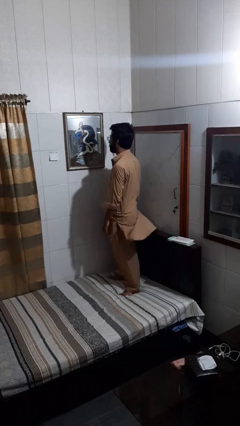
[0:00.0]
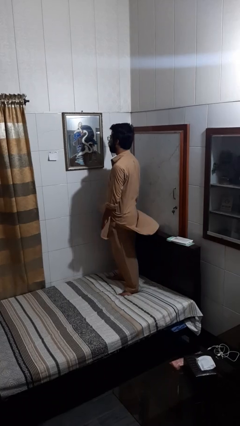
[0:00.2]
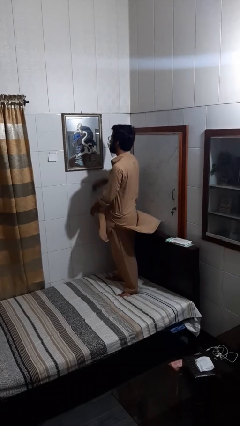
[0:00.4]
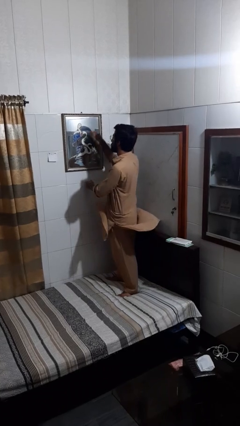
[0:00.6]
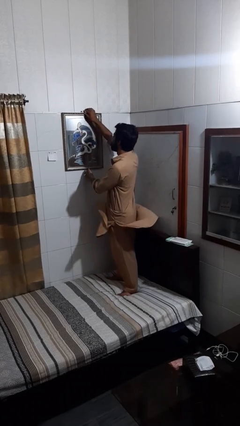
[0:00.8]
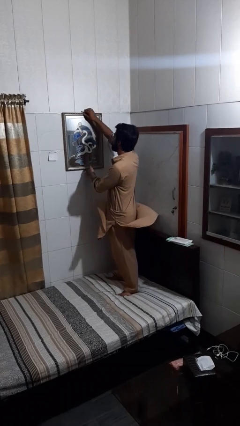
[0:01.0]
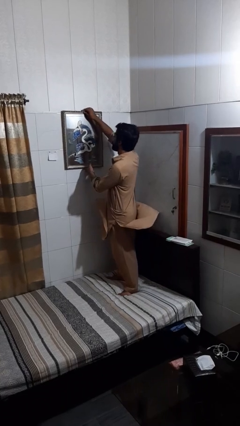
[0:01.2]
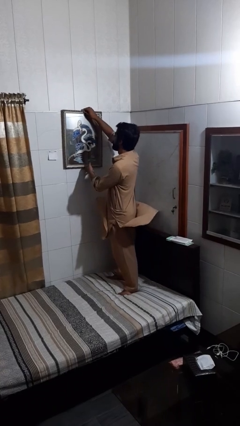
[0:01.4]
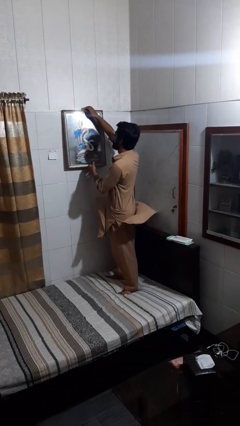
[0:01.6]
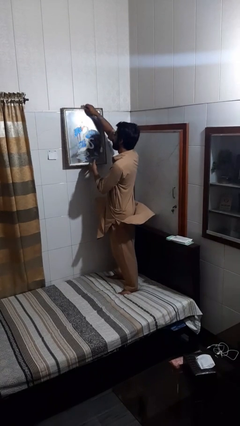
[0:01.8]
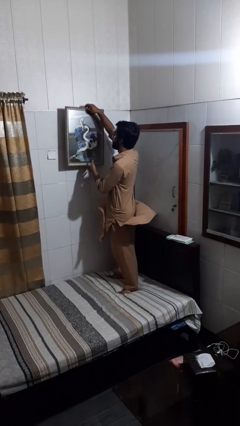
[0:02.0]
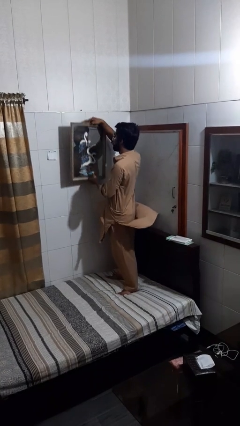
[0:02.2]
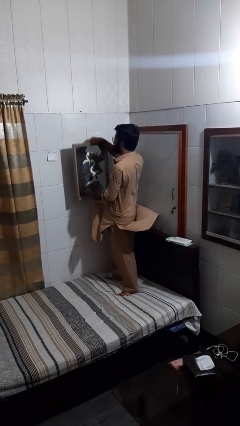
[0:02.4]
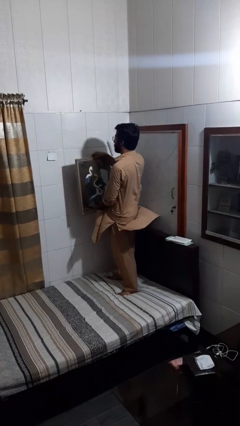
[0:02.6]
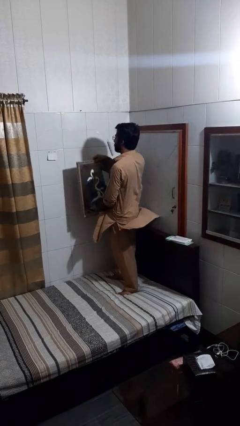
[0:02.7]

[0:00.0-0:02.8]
person takes down picture frame

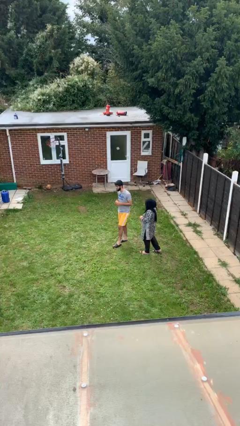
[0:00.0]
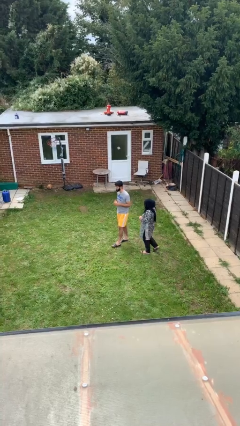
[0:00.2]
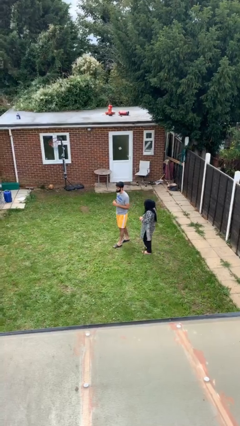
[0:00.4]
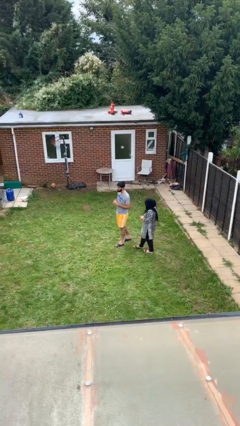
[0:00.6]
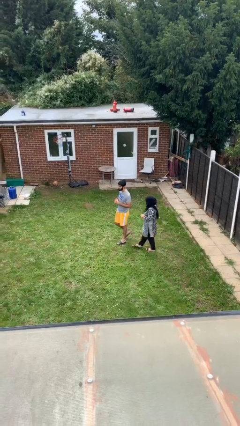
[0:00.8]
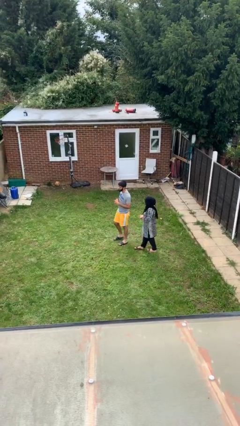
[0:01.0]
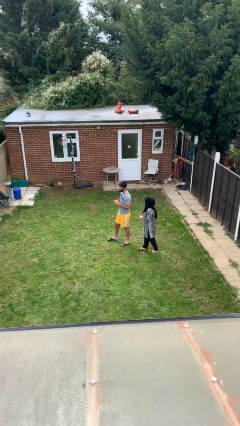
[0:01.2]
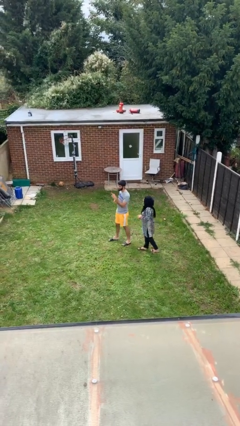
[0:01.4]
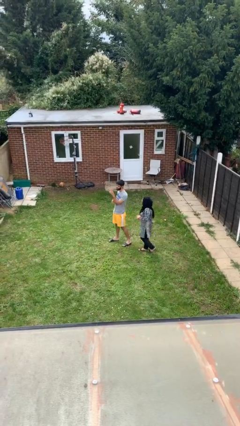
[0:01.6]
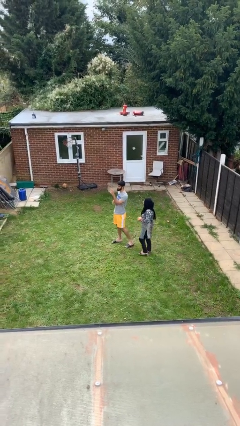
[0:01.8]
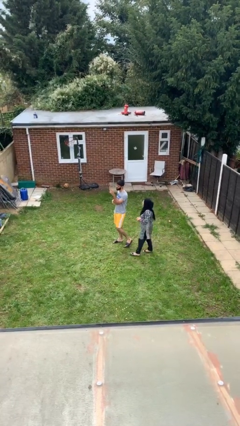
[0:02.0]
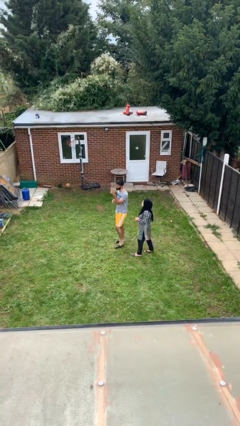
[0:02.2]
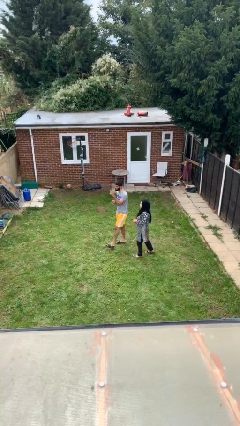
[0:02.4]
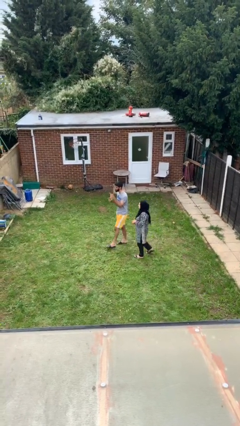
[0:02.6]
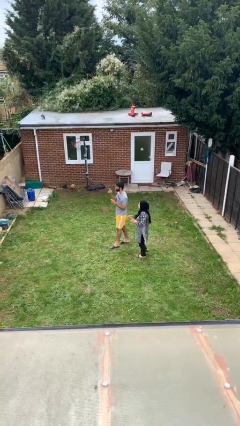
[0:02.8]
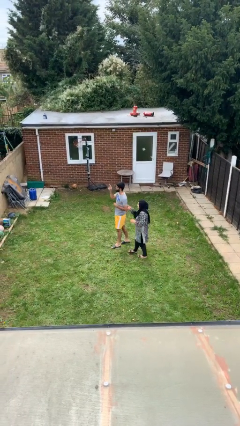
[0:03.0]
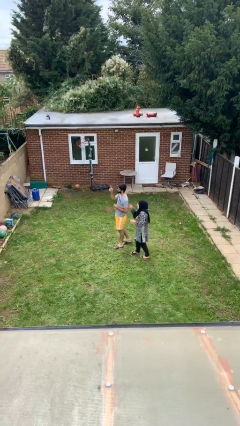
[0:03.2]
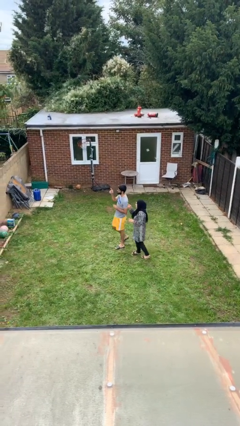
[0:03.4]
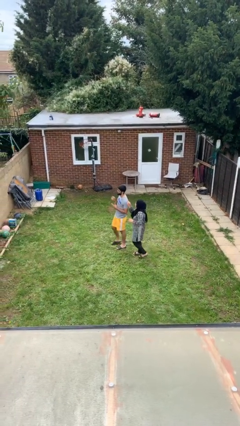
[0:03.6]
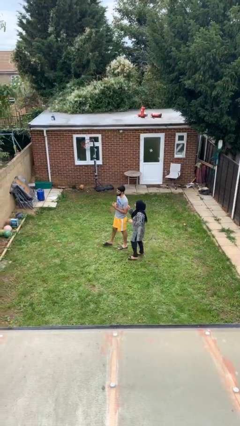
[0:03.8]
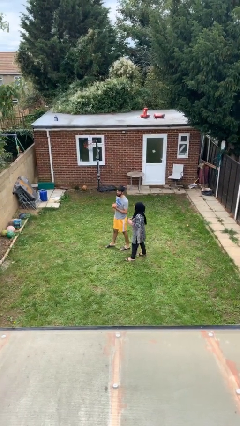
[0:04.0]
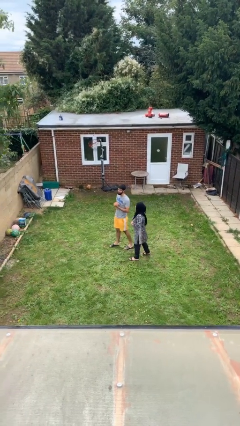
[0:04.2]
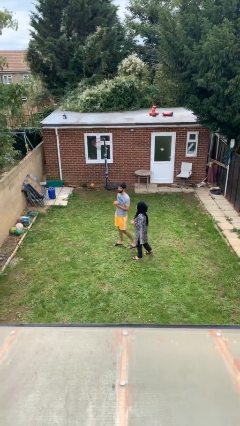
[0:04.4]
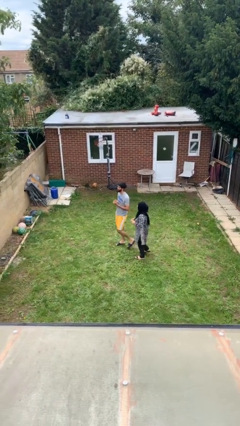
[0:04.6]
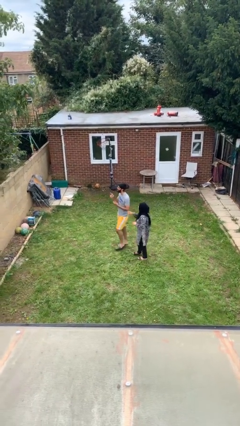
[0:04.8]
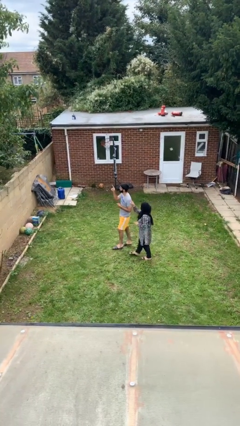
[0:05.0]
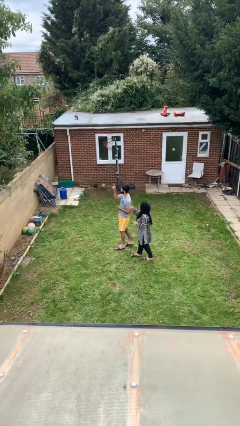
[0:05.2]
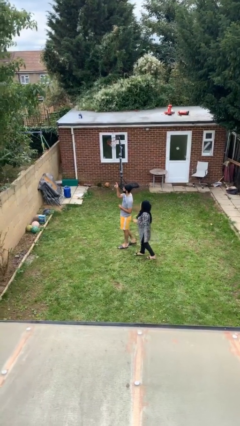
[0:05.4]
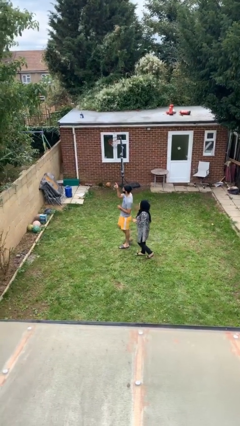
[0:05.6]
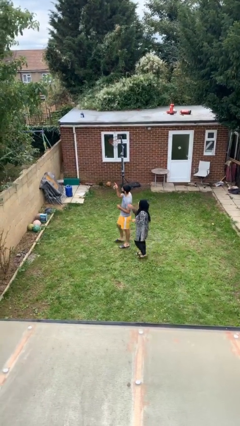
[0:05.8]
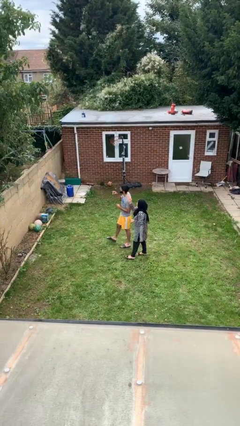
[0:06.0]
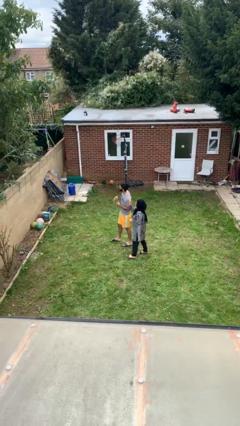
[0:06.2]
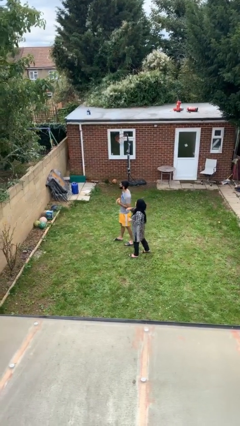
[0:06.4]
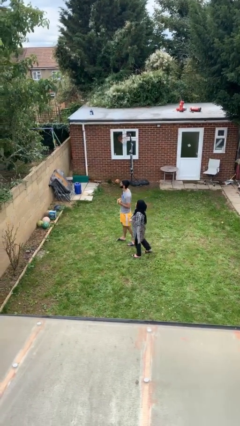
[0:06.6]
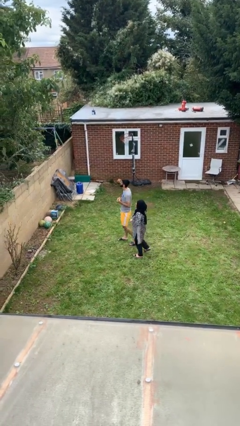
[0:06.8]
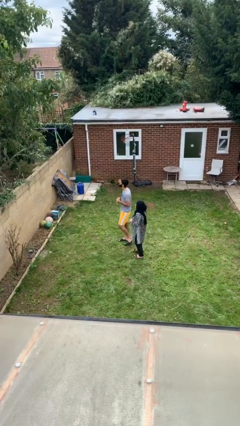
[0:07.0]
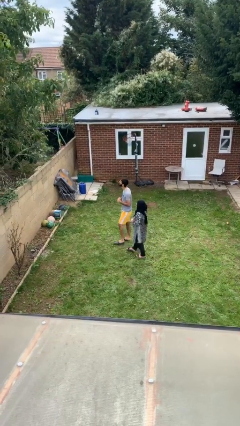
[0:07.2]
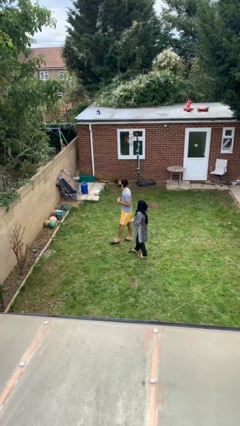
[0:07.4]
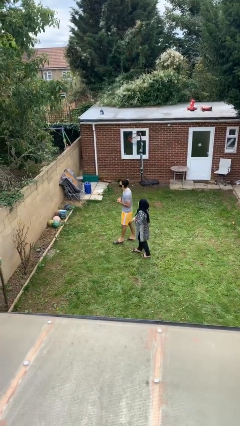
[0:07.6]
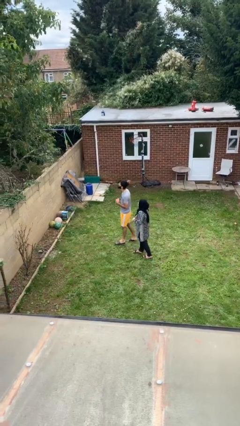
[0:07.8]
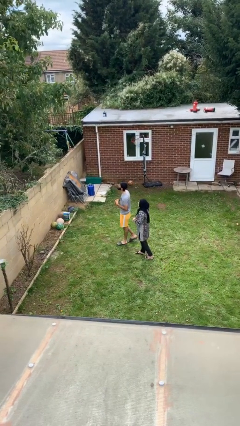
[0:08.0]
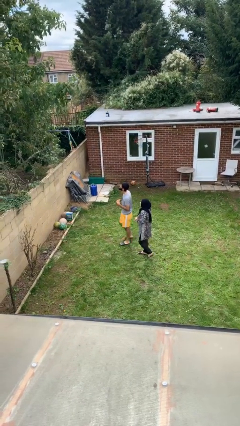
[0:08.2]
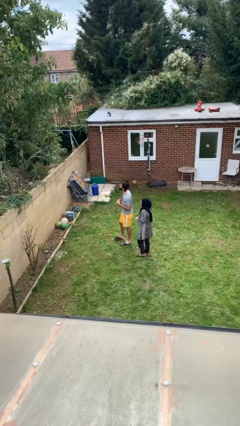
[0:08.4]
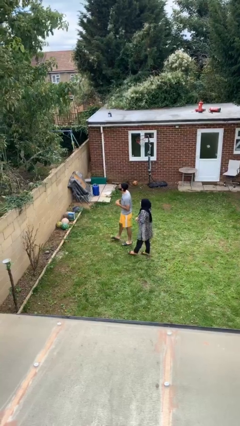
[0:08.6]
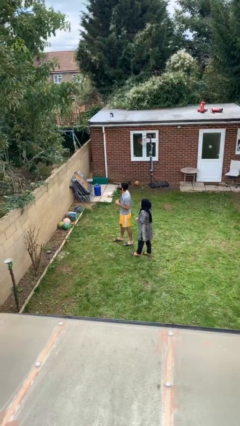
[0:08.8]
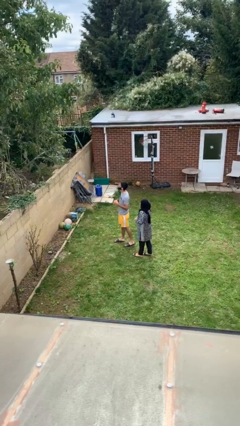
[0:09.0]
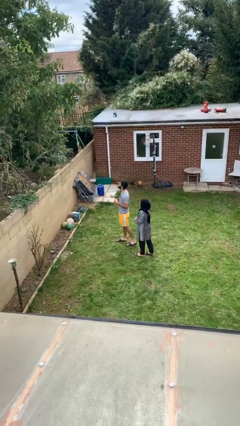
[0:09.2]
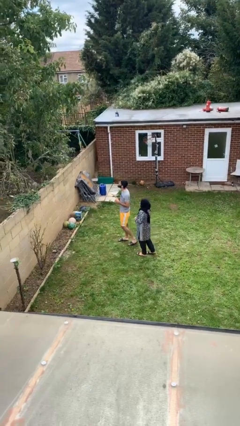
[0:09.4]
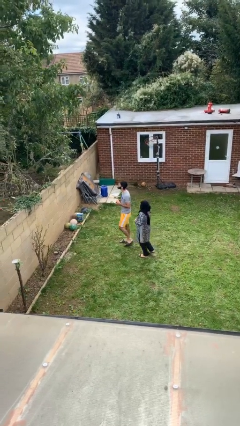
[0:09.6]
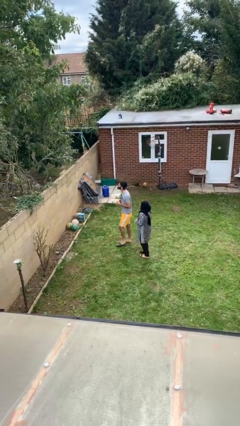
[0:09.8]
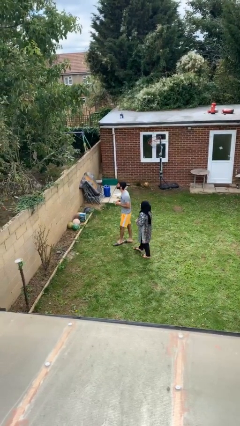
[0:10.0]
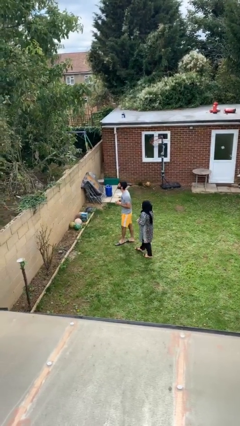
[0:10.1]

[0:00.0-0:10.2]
person talks to person

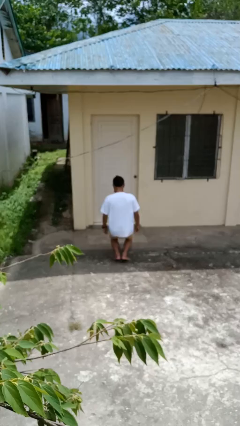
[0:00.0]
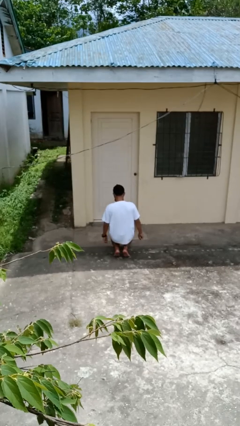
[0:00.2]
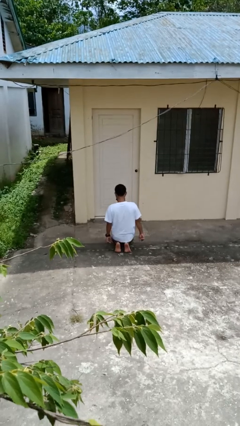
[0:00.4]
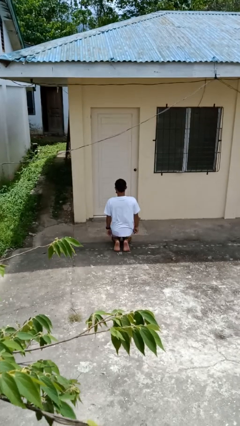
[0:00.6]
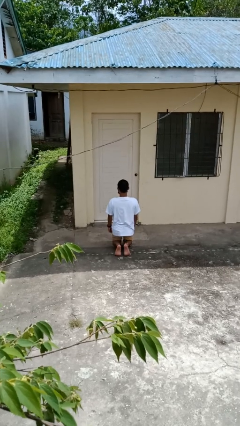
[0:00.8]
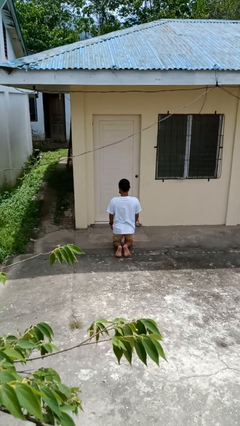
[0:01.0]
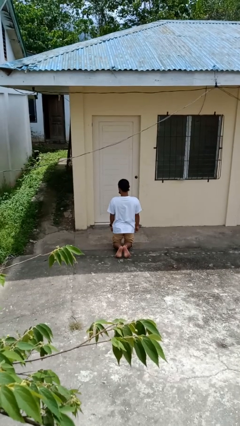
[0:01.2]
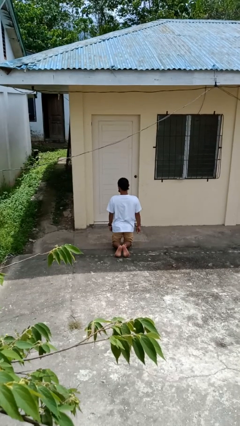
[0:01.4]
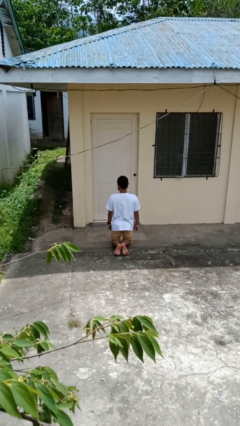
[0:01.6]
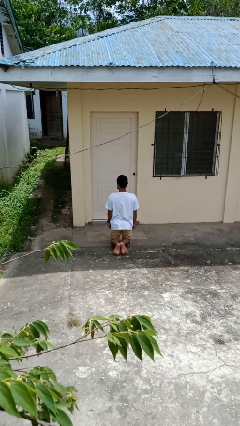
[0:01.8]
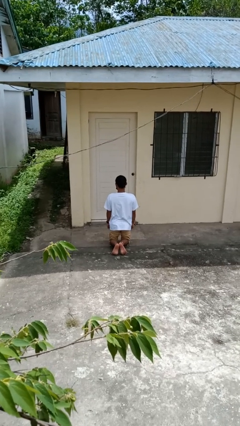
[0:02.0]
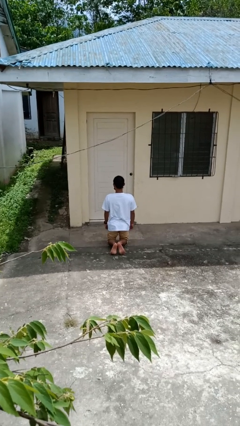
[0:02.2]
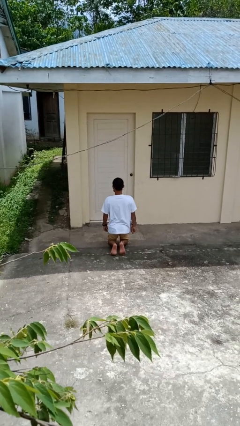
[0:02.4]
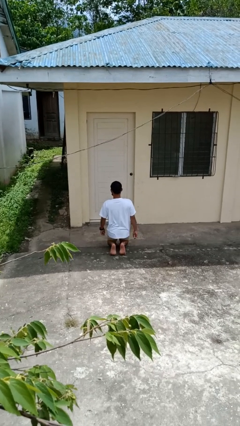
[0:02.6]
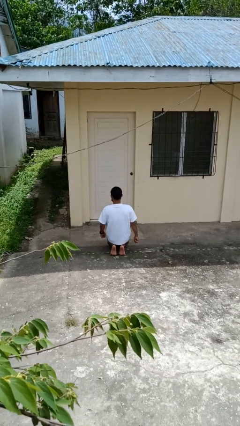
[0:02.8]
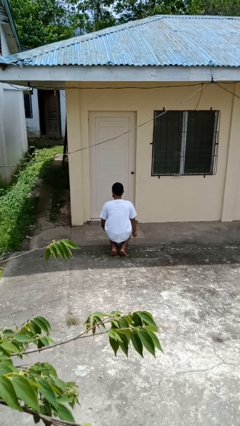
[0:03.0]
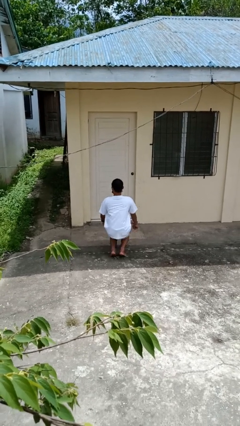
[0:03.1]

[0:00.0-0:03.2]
person kneels

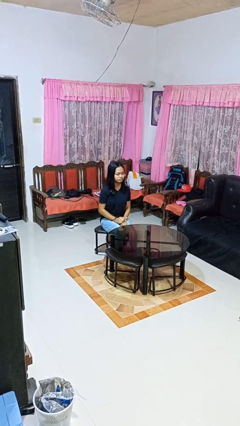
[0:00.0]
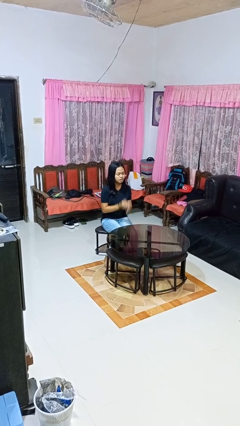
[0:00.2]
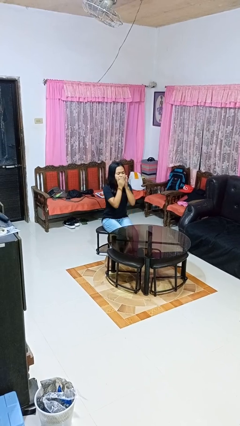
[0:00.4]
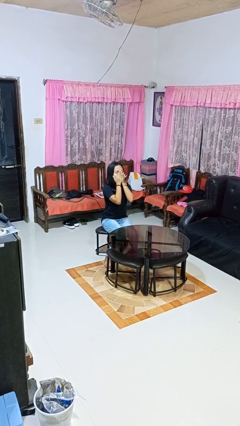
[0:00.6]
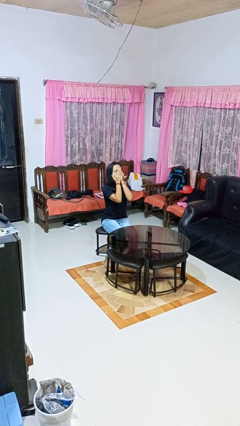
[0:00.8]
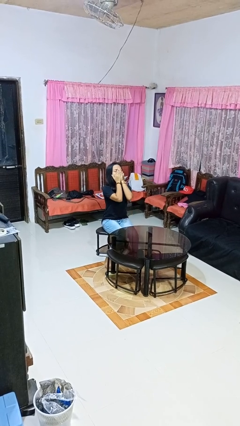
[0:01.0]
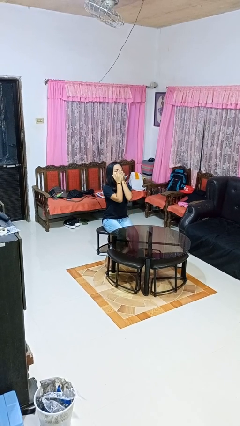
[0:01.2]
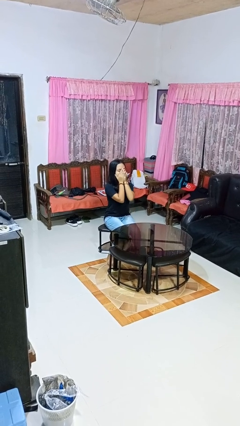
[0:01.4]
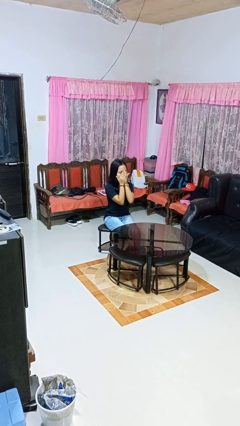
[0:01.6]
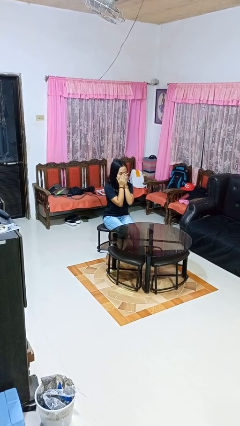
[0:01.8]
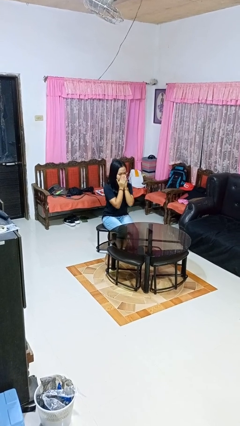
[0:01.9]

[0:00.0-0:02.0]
person yawns
